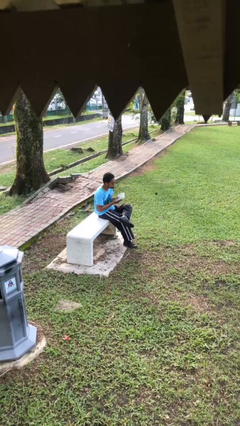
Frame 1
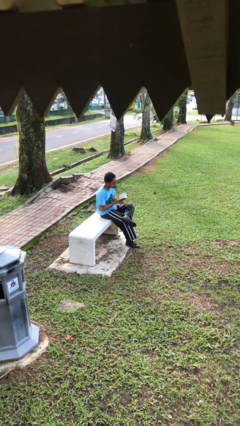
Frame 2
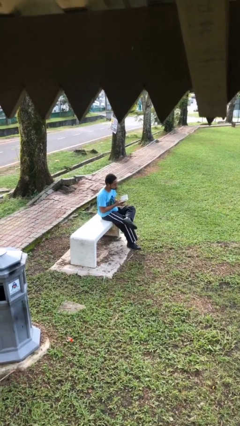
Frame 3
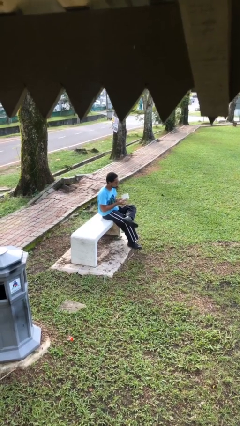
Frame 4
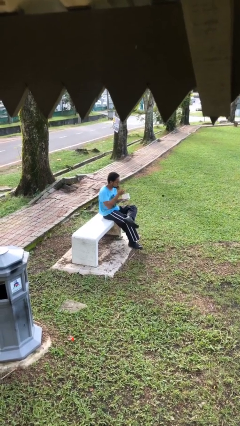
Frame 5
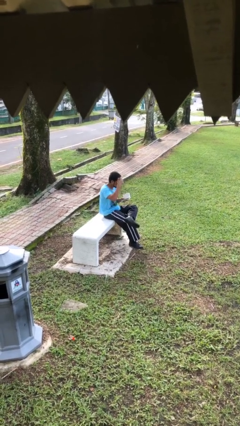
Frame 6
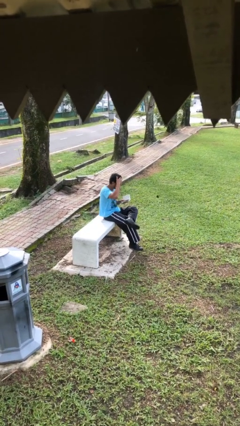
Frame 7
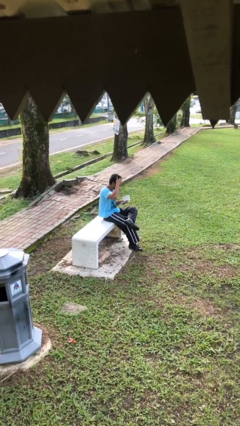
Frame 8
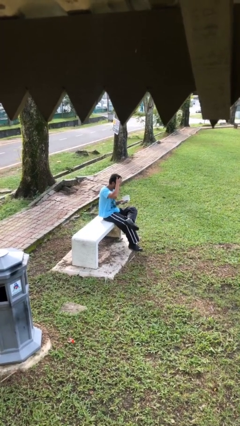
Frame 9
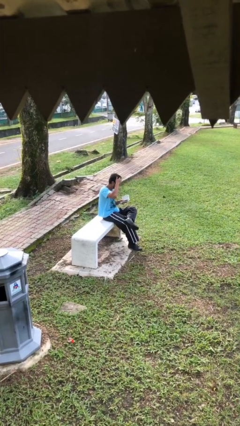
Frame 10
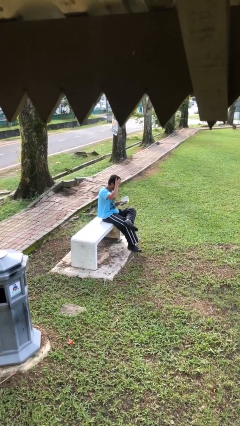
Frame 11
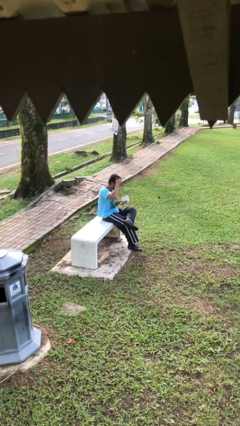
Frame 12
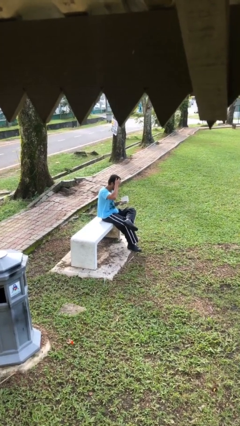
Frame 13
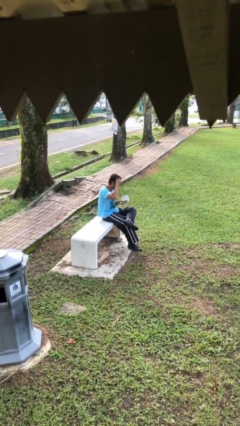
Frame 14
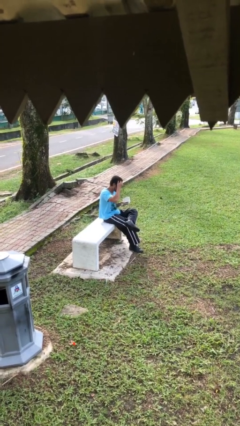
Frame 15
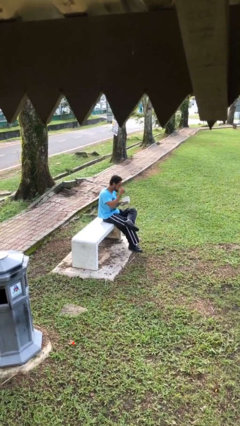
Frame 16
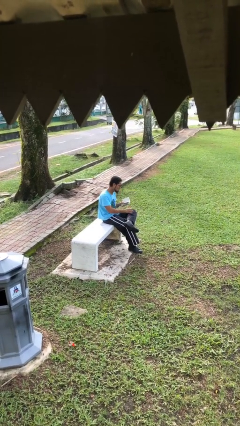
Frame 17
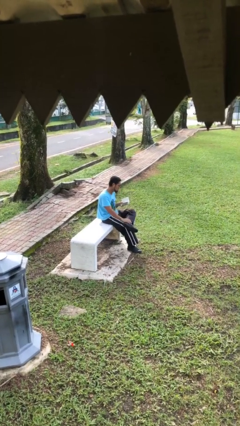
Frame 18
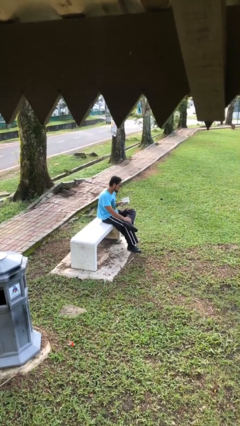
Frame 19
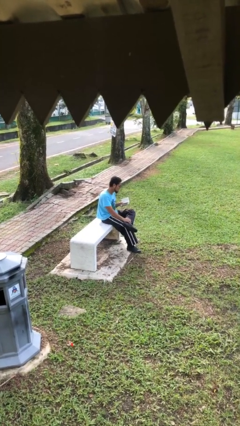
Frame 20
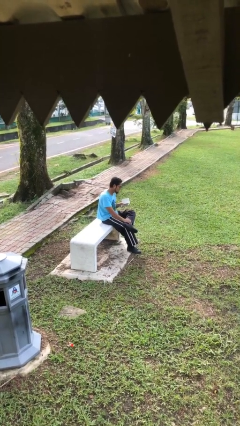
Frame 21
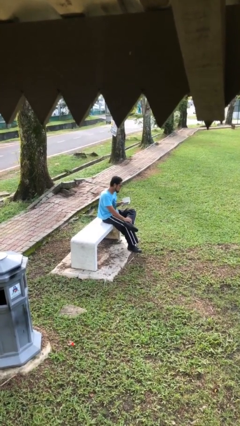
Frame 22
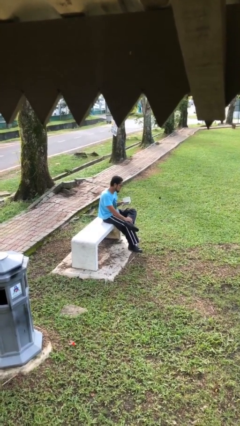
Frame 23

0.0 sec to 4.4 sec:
person reads document

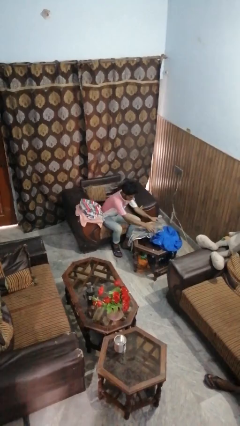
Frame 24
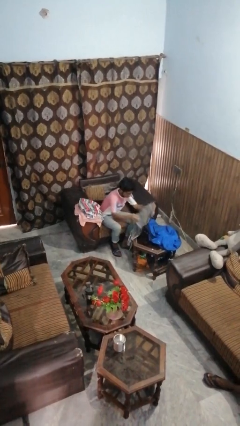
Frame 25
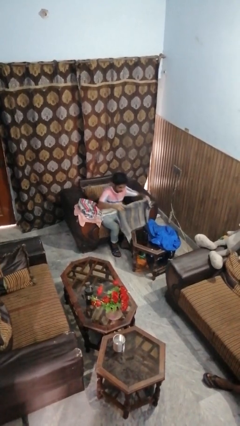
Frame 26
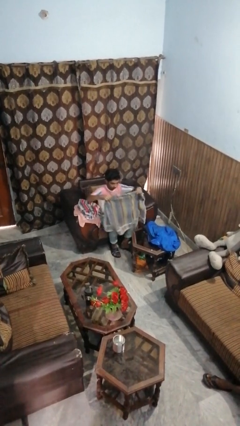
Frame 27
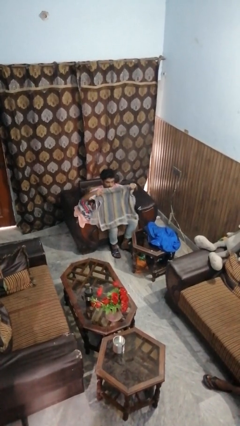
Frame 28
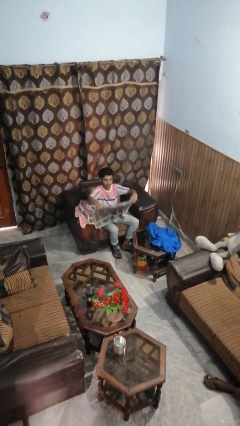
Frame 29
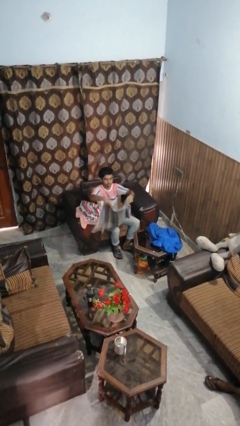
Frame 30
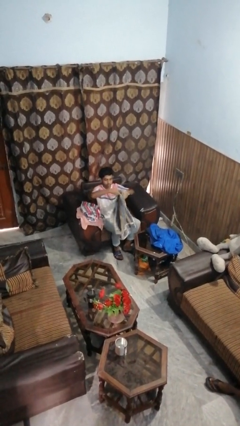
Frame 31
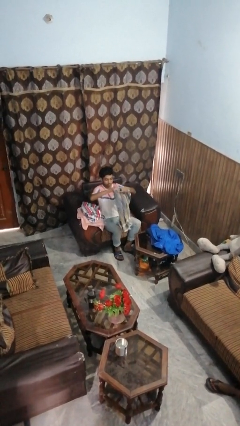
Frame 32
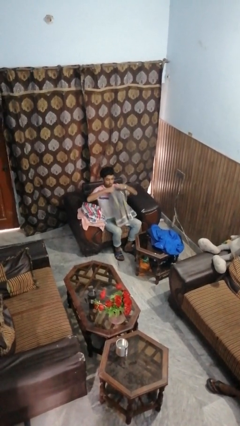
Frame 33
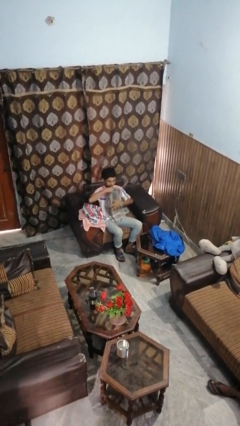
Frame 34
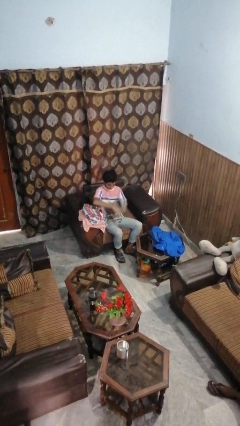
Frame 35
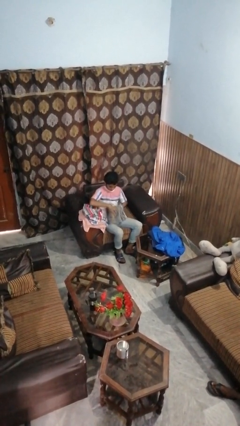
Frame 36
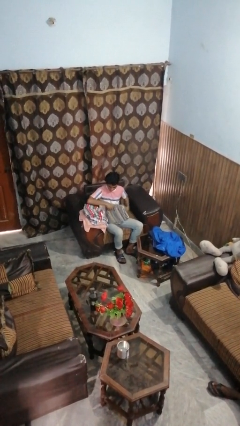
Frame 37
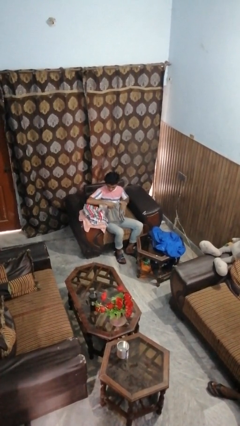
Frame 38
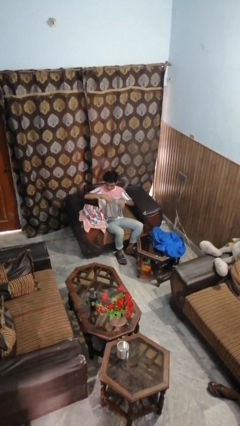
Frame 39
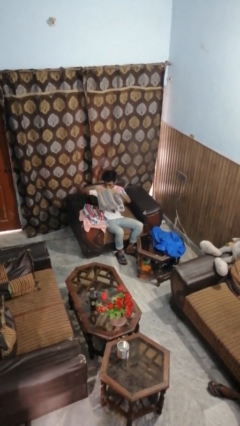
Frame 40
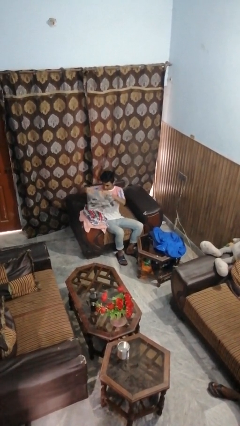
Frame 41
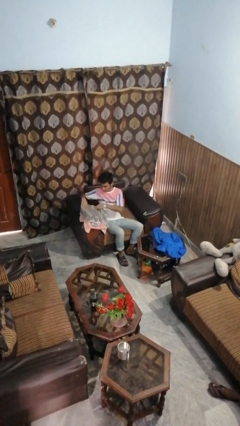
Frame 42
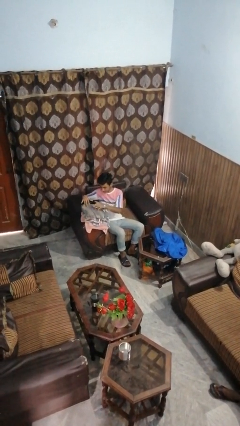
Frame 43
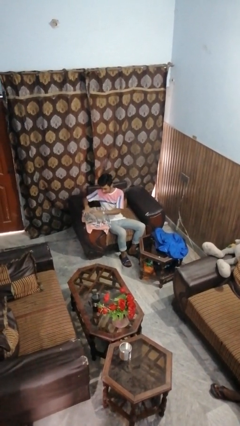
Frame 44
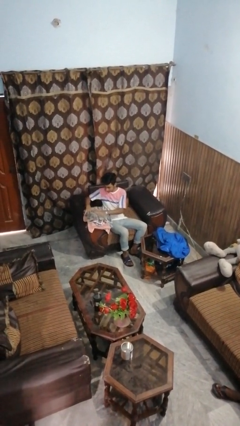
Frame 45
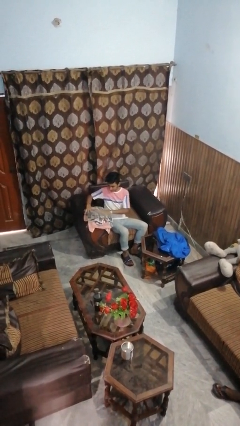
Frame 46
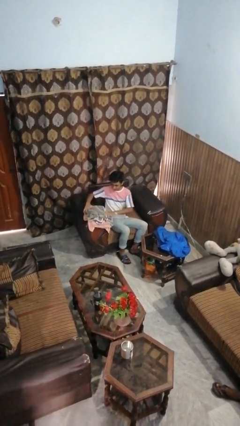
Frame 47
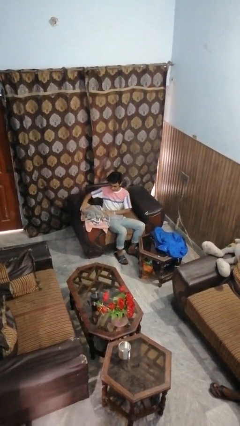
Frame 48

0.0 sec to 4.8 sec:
person folds towel

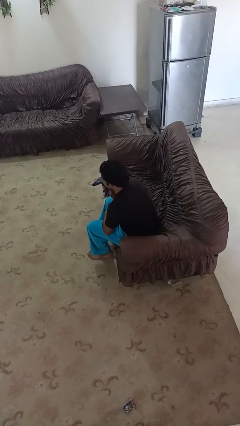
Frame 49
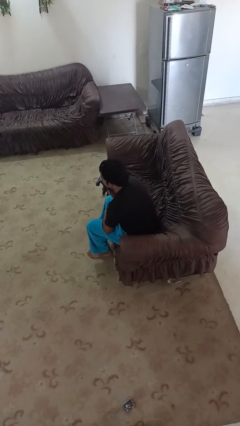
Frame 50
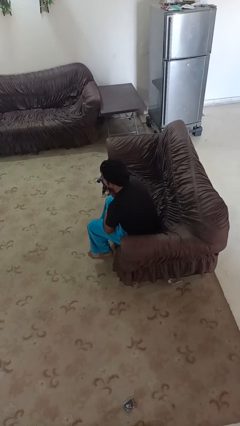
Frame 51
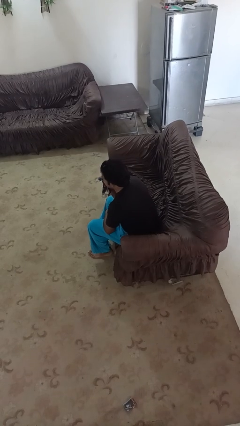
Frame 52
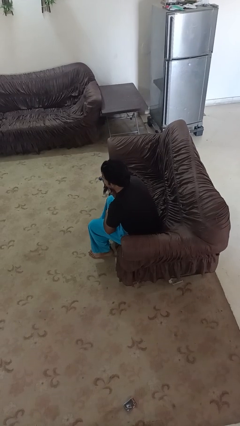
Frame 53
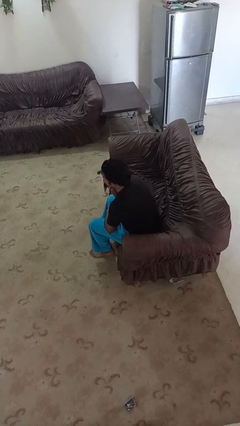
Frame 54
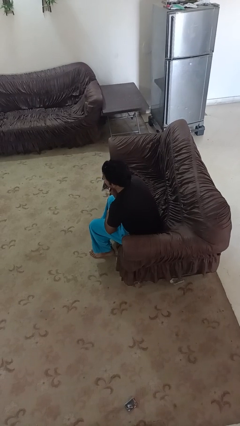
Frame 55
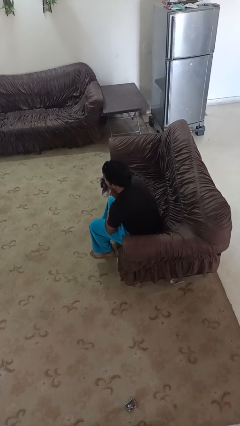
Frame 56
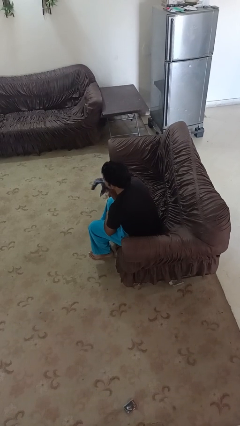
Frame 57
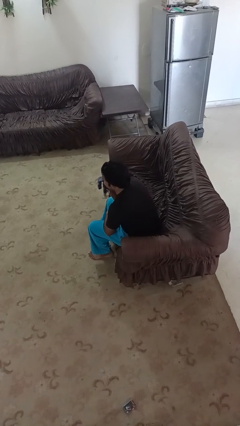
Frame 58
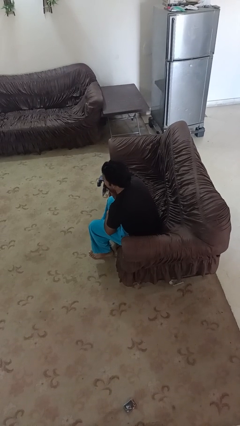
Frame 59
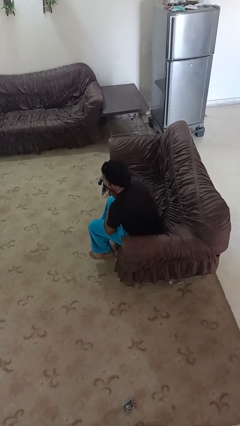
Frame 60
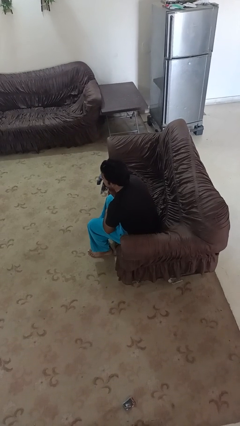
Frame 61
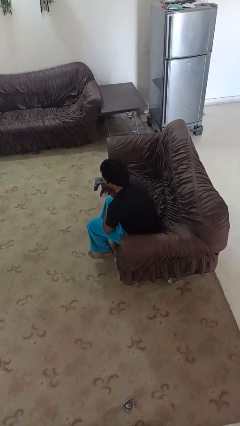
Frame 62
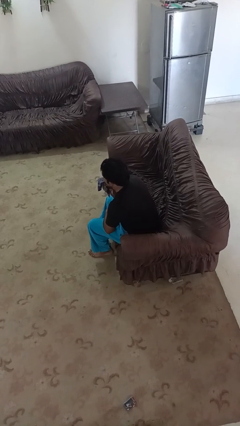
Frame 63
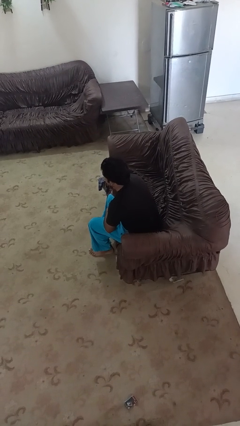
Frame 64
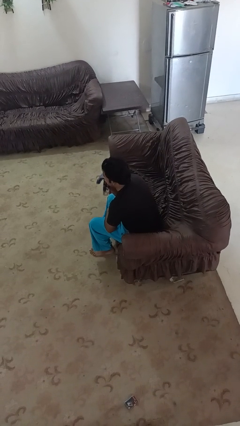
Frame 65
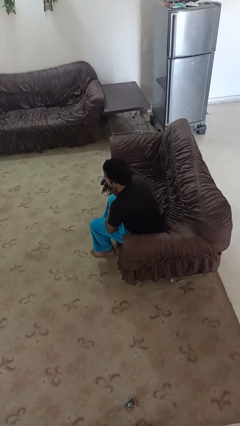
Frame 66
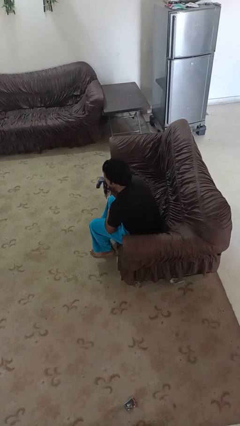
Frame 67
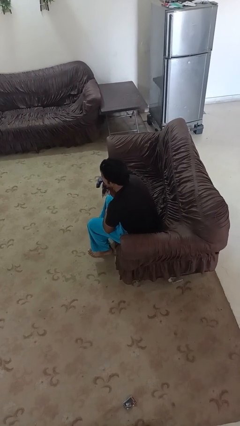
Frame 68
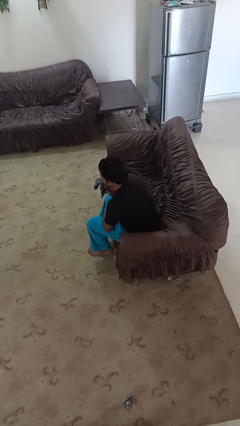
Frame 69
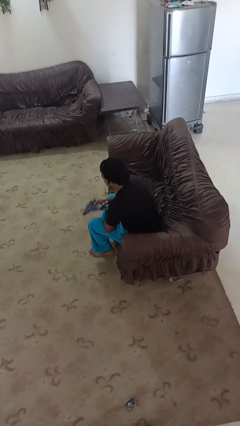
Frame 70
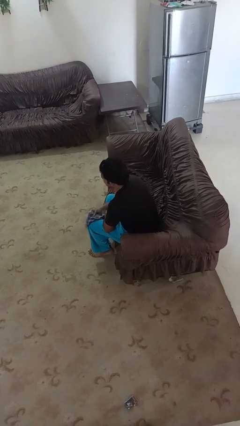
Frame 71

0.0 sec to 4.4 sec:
person wipes mouth with napkin

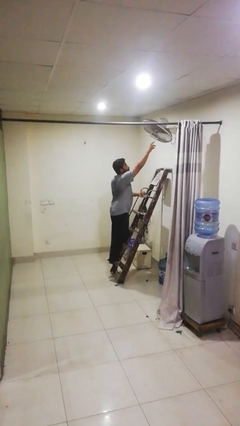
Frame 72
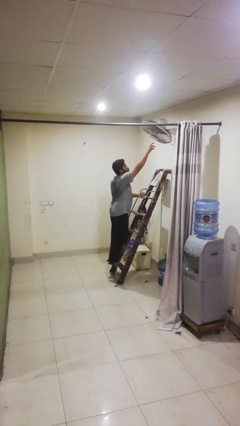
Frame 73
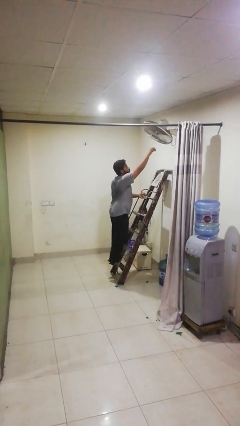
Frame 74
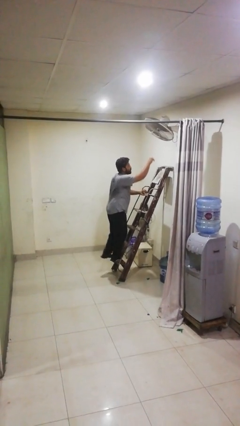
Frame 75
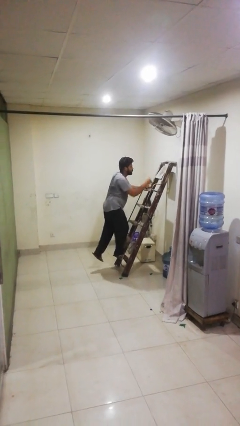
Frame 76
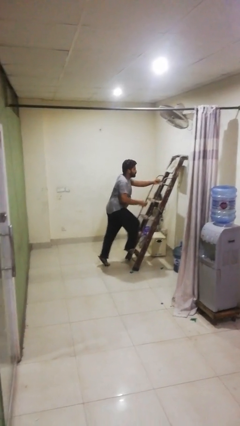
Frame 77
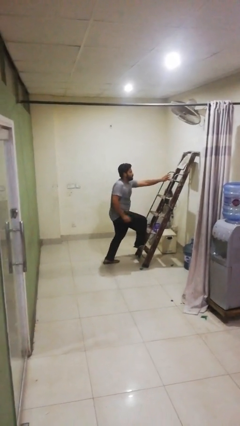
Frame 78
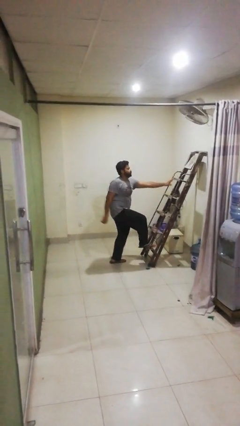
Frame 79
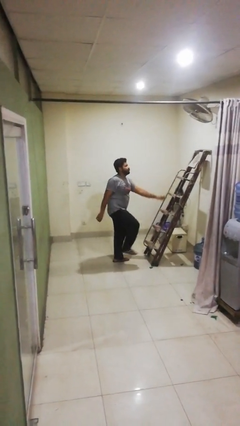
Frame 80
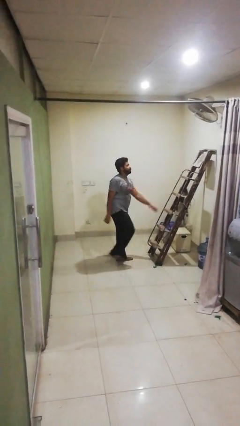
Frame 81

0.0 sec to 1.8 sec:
person climbs down ladder

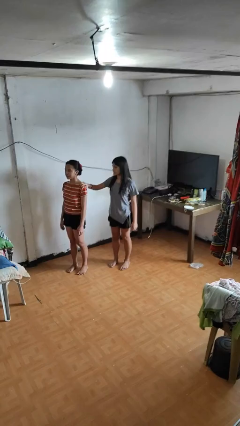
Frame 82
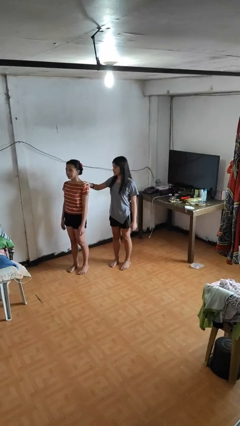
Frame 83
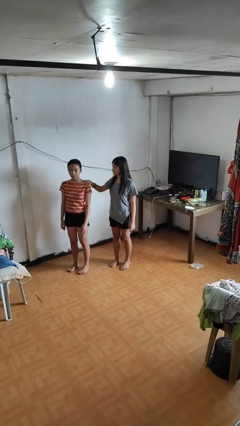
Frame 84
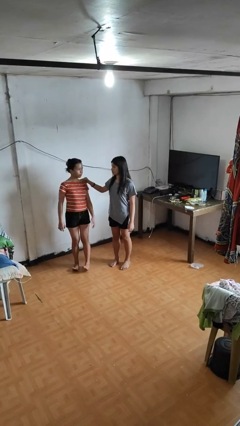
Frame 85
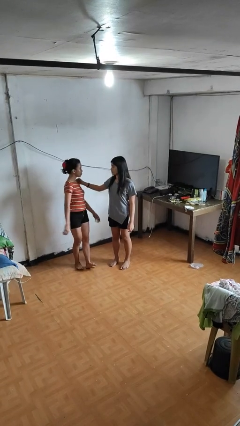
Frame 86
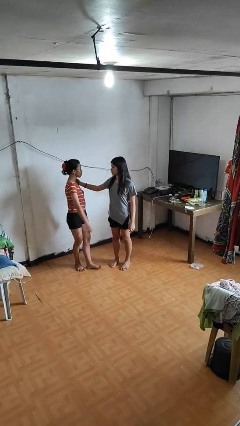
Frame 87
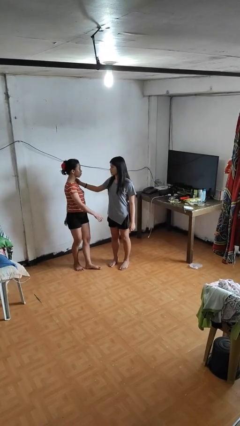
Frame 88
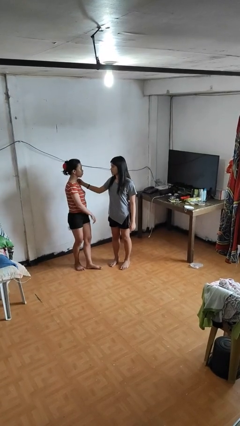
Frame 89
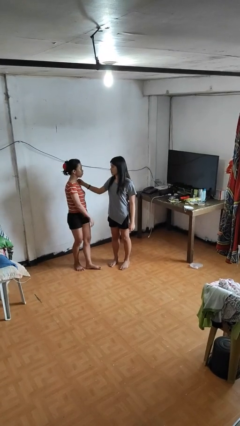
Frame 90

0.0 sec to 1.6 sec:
person spins person around
